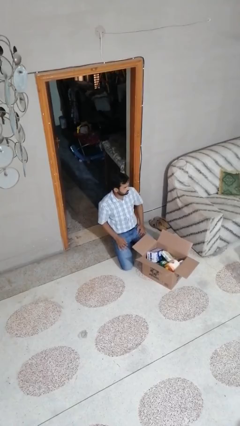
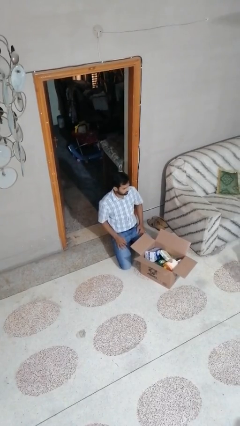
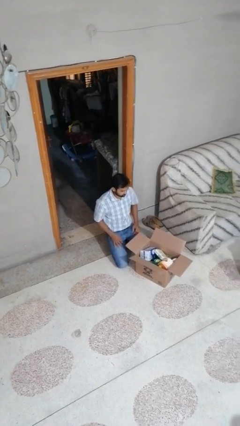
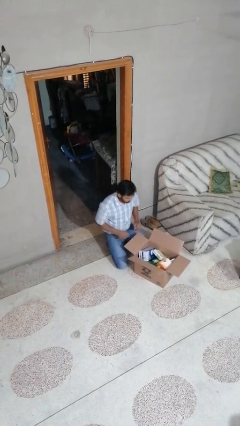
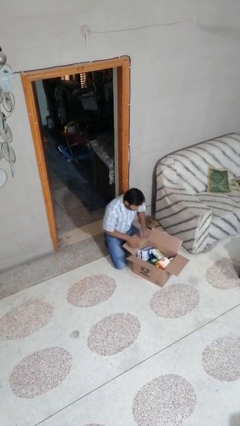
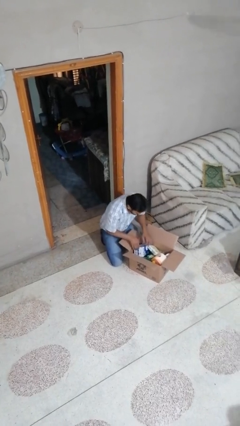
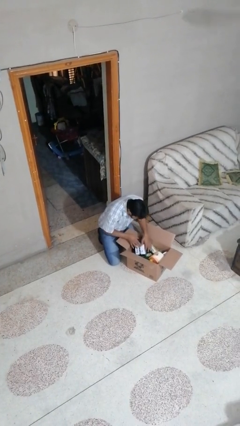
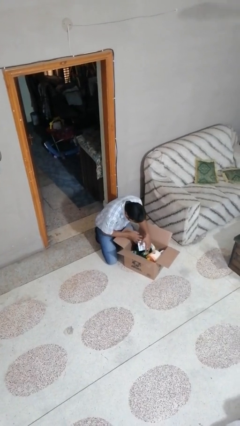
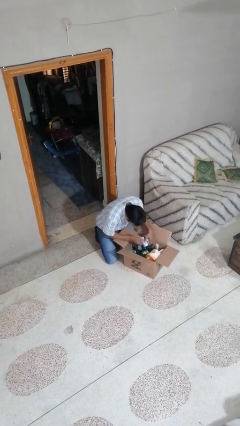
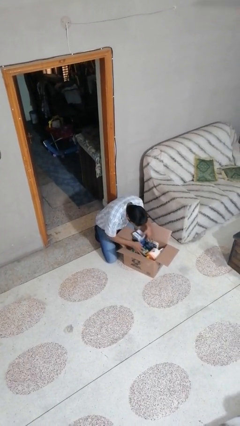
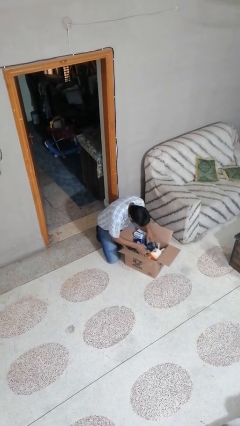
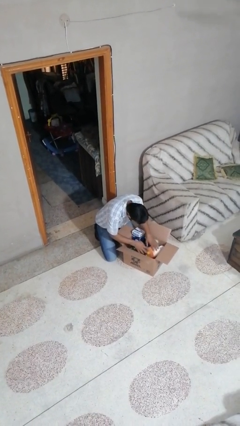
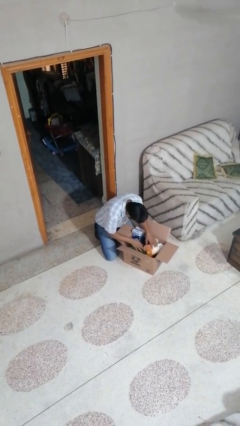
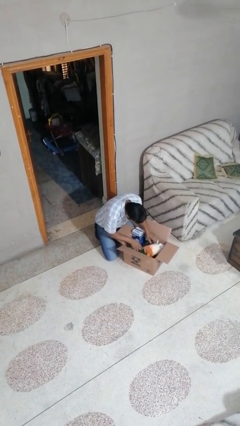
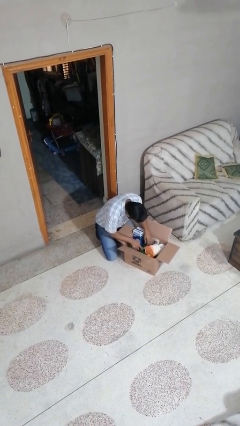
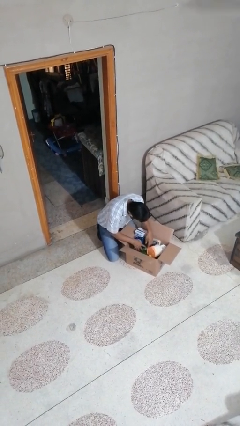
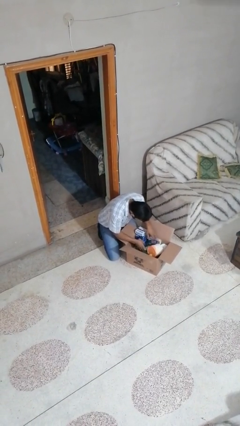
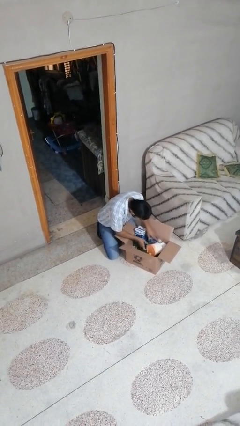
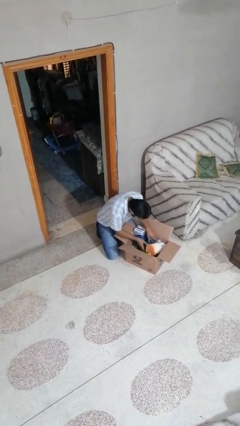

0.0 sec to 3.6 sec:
person searches in box

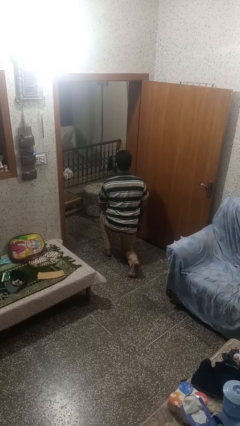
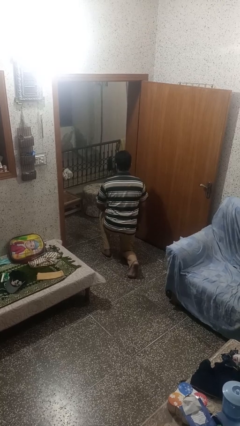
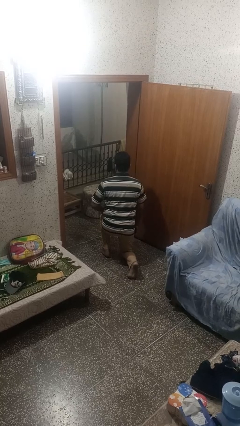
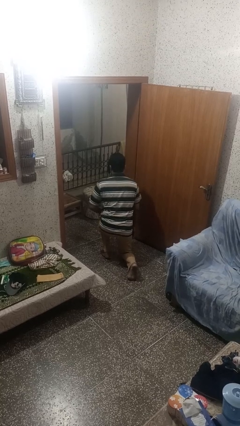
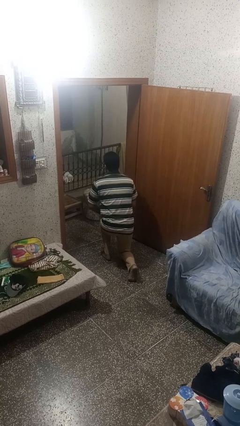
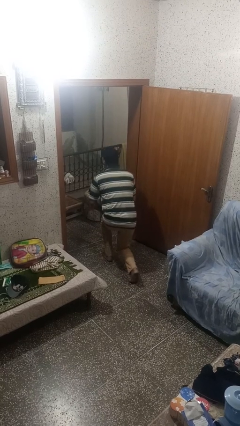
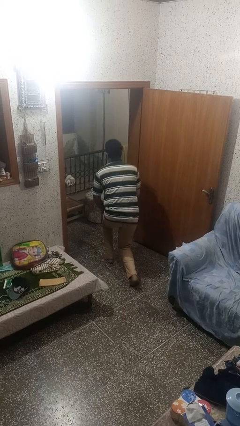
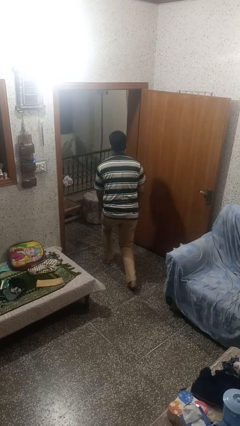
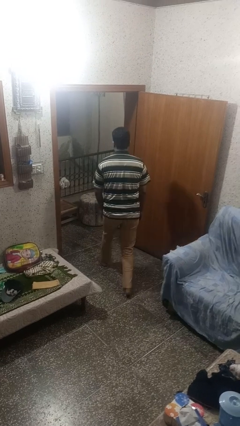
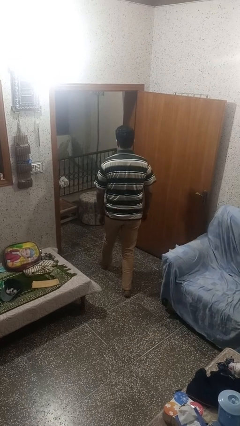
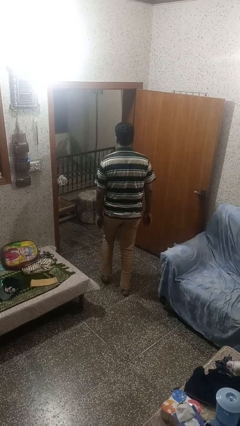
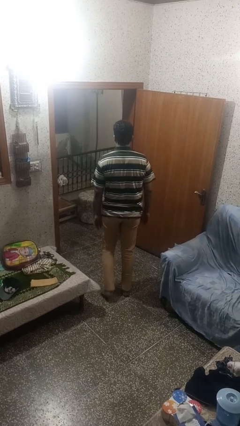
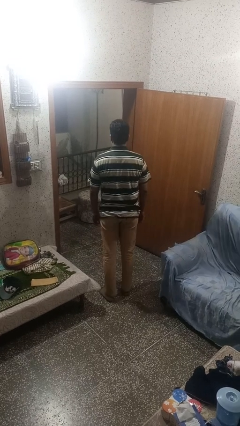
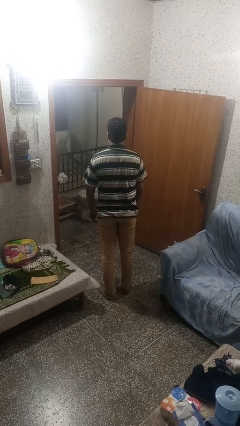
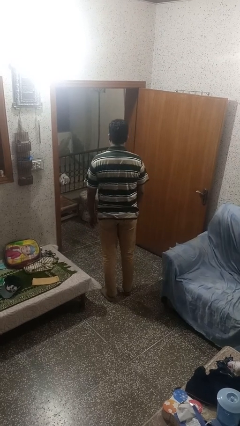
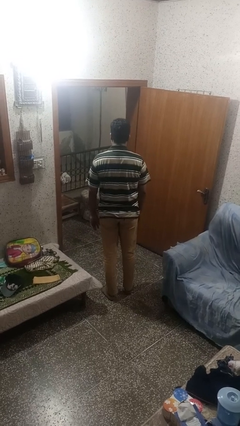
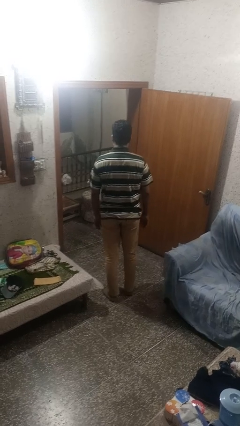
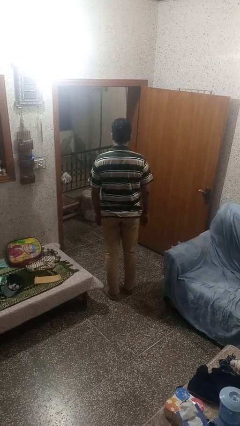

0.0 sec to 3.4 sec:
person stands up from floor

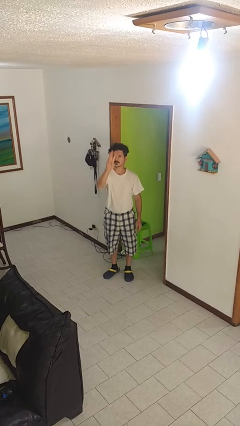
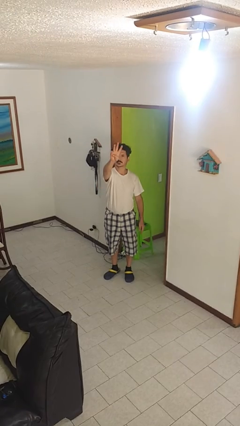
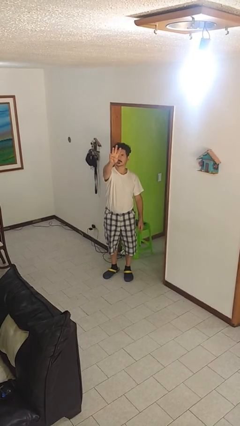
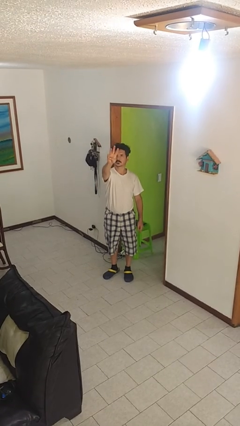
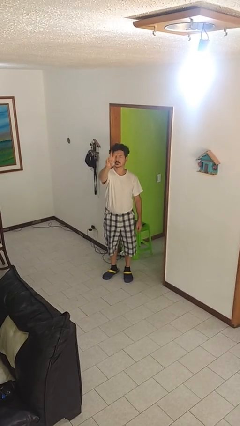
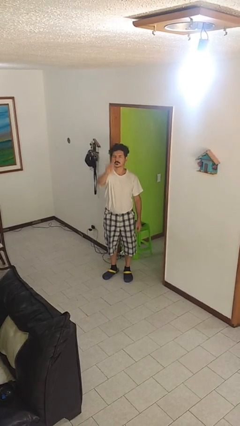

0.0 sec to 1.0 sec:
person gestures number three

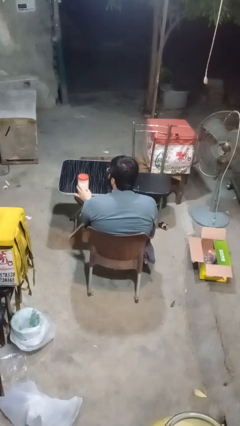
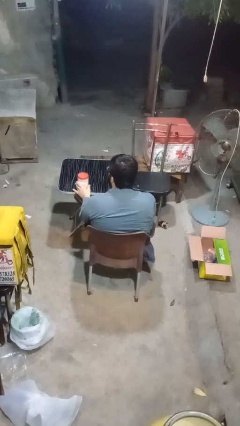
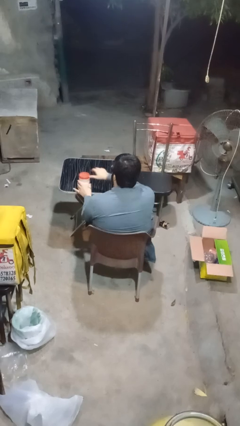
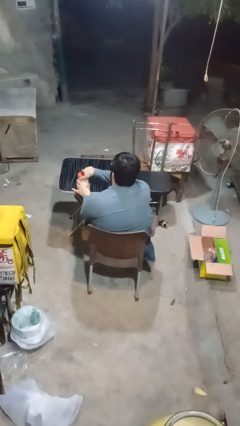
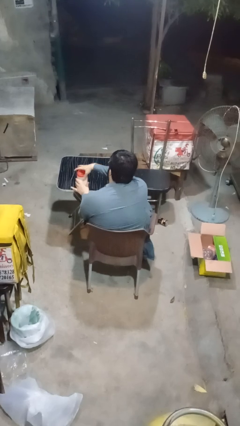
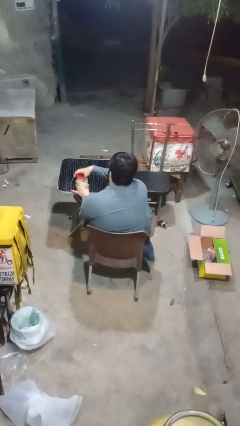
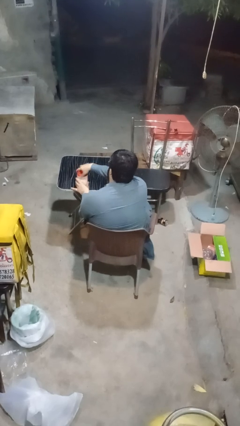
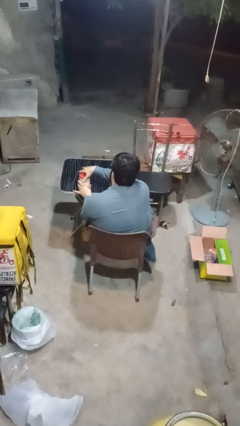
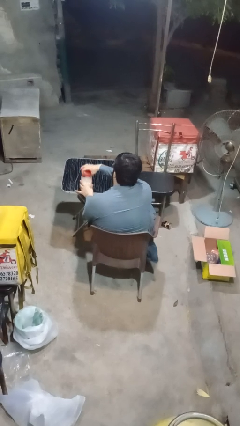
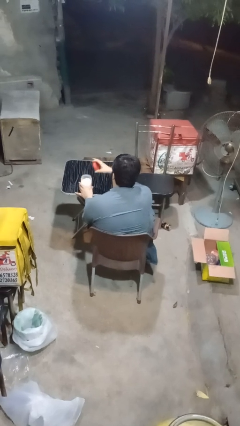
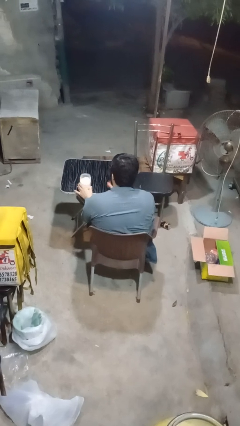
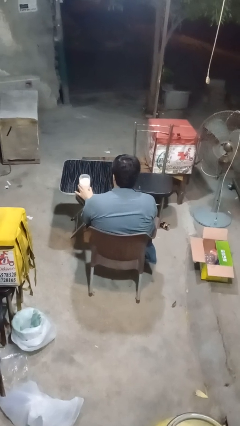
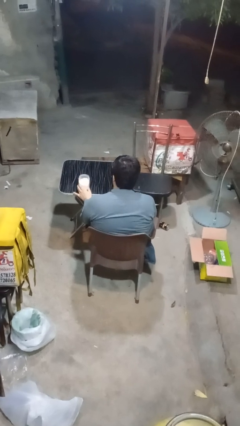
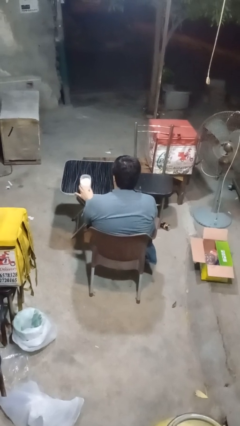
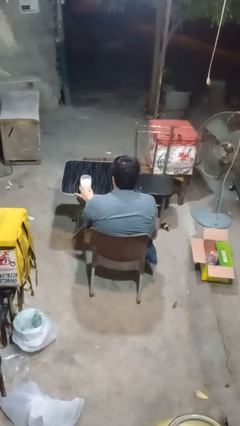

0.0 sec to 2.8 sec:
person opens jar

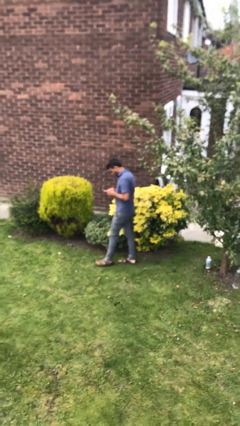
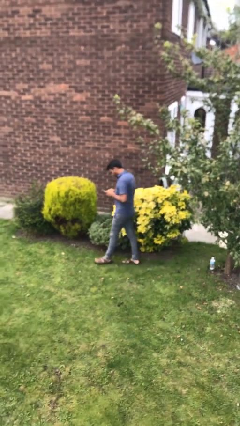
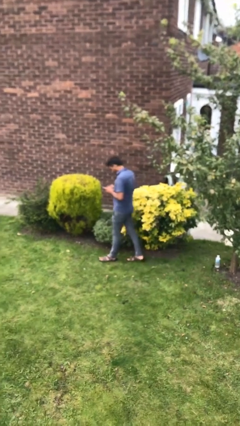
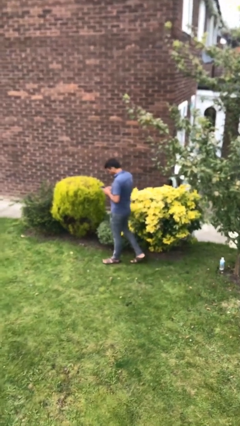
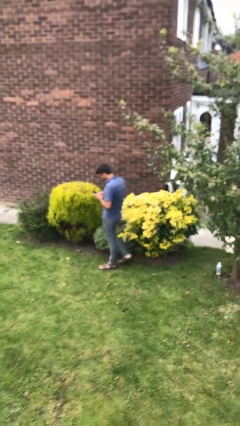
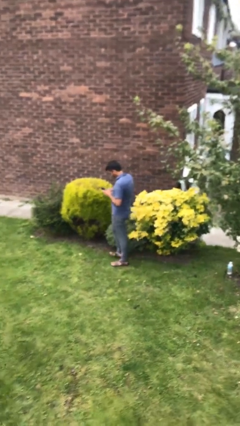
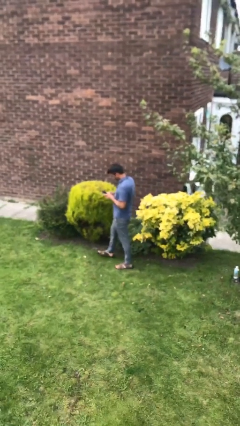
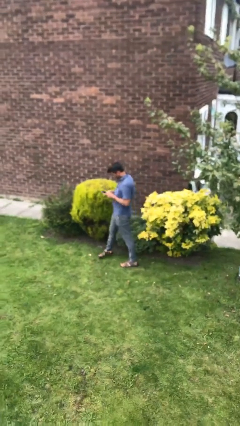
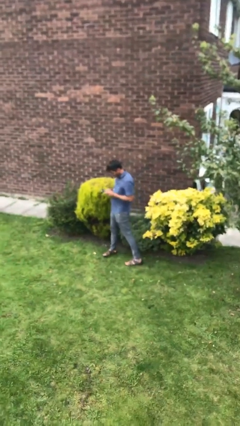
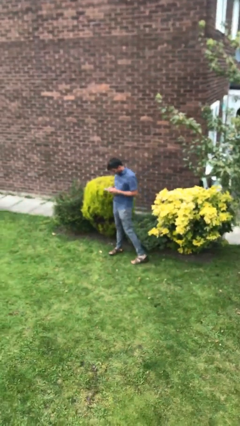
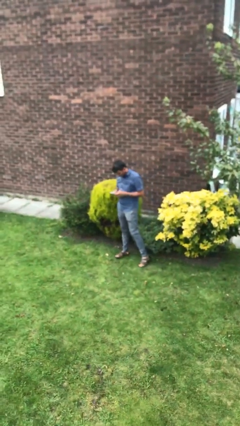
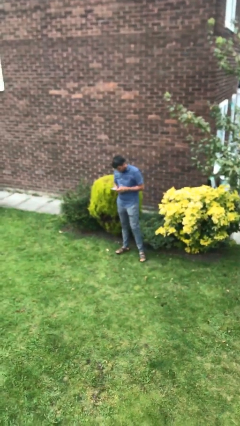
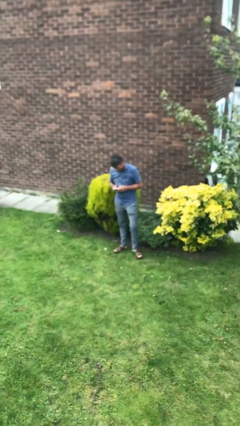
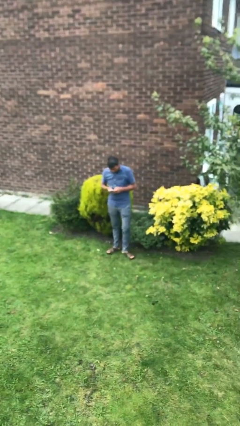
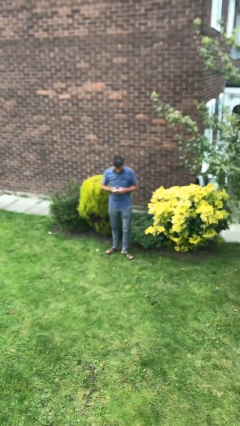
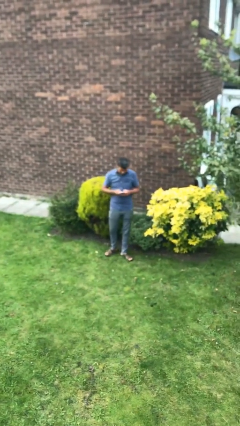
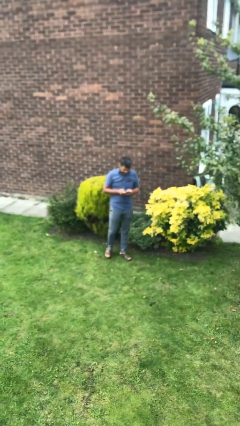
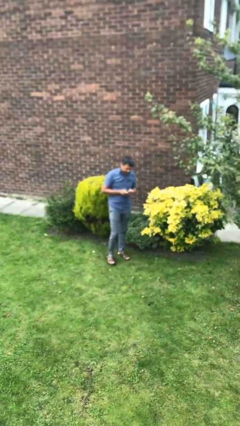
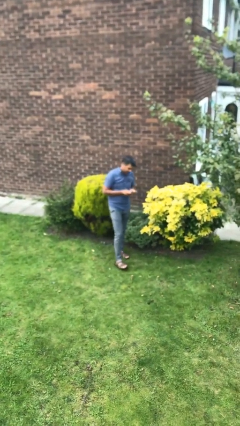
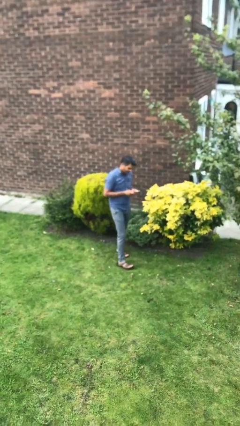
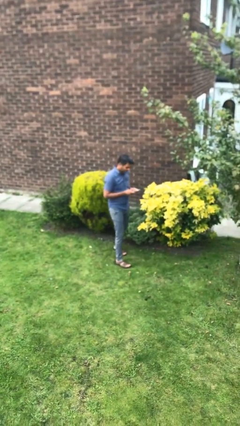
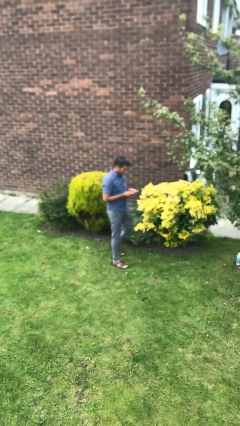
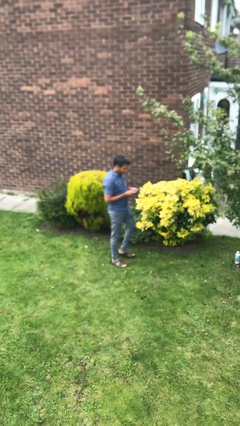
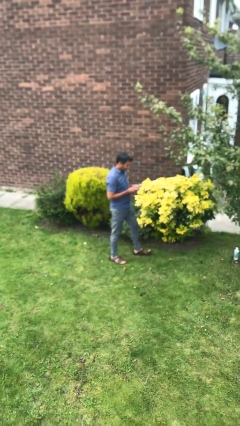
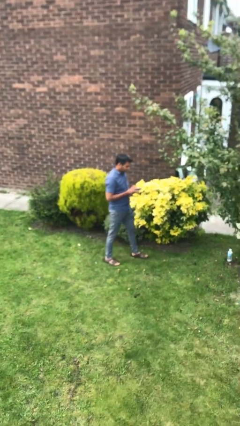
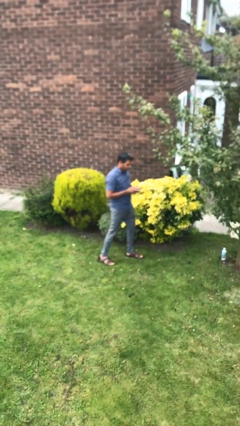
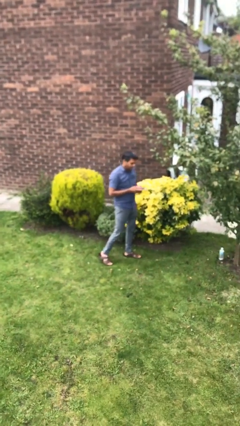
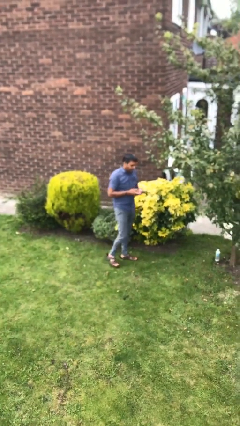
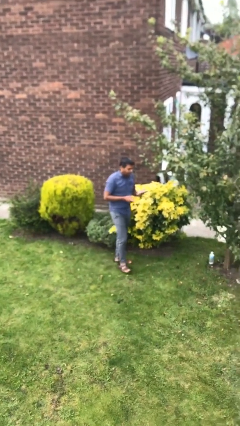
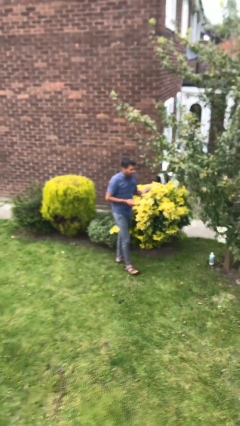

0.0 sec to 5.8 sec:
person texts on phone

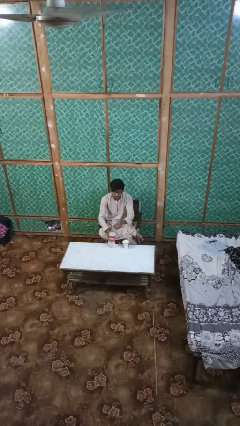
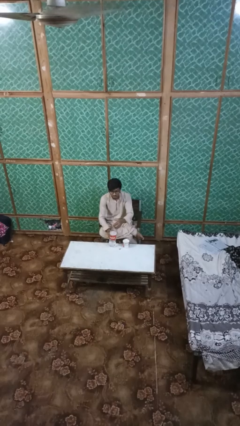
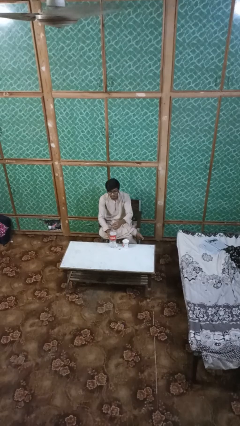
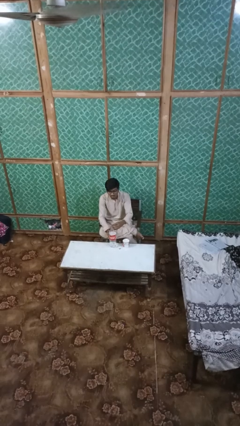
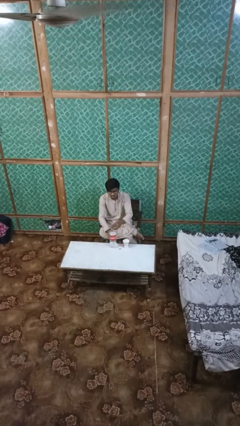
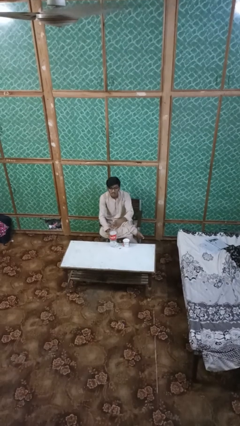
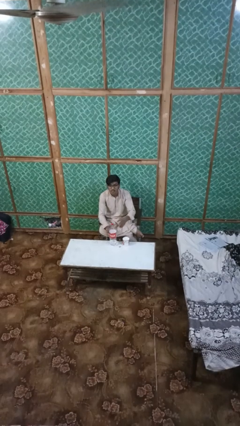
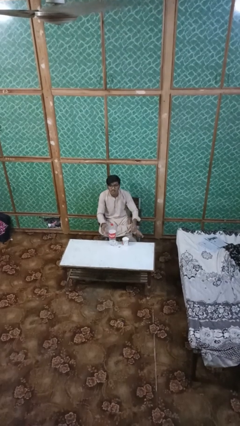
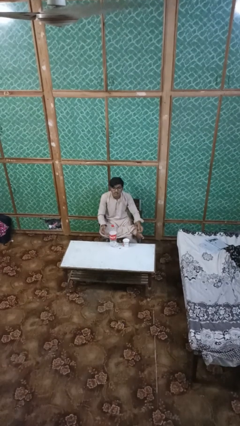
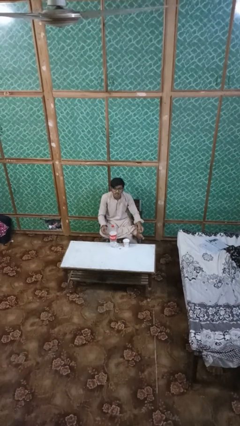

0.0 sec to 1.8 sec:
person screws lid to bottle
